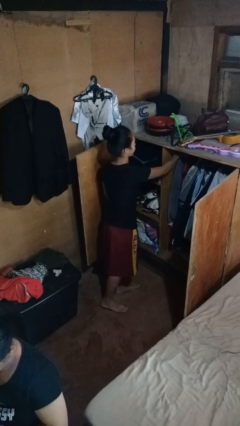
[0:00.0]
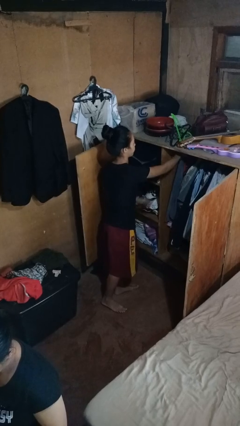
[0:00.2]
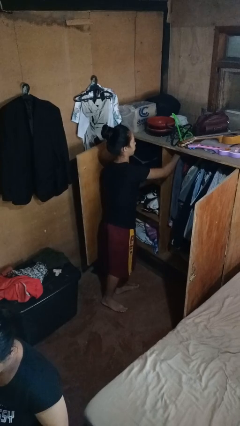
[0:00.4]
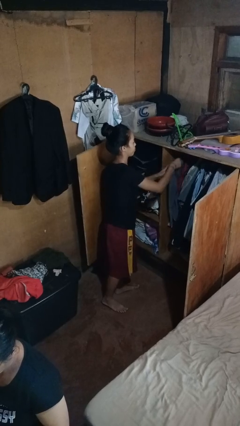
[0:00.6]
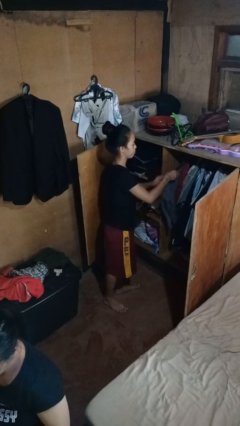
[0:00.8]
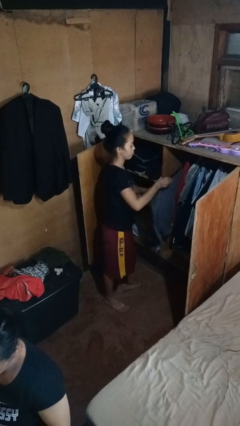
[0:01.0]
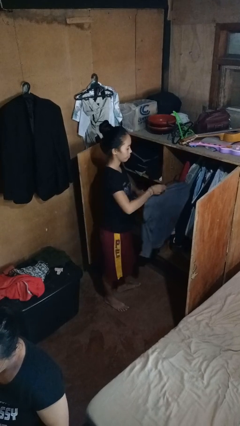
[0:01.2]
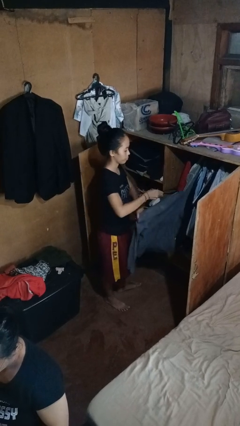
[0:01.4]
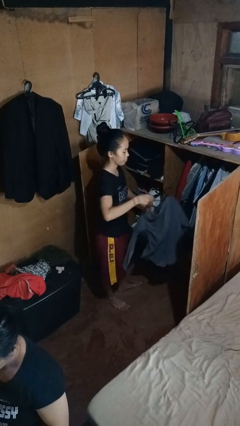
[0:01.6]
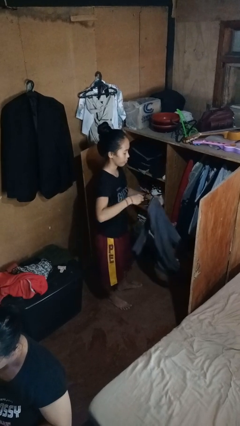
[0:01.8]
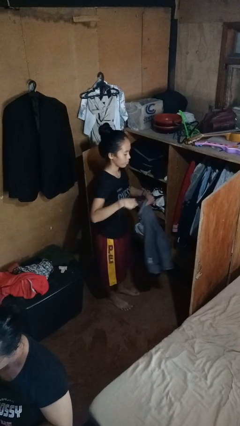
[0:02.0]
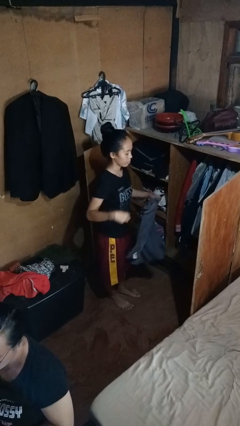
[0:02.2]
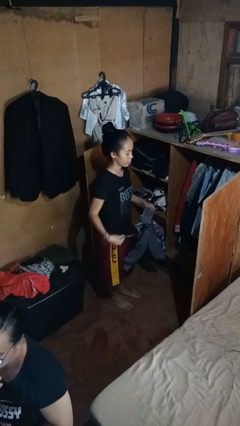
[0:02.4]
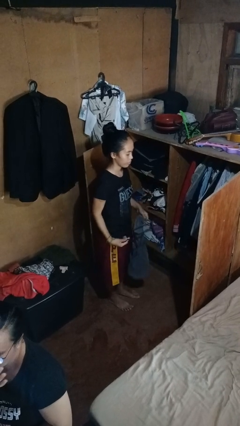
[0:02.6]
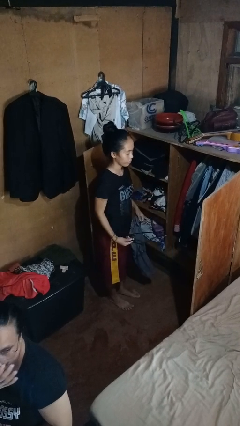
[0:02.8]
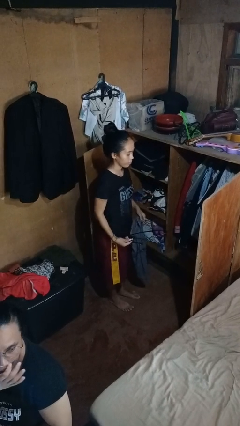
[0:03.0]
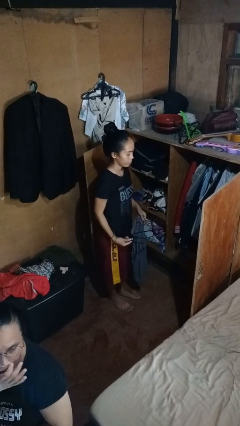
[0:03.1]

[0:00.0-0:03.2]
person takes clothes from closet

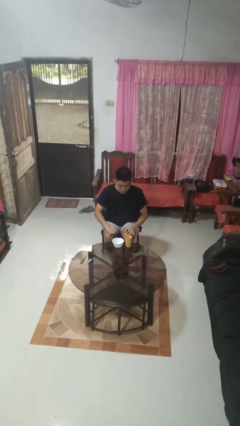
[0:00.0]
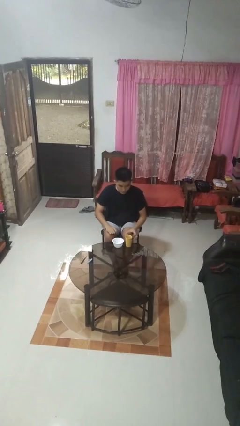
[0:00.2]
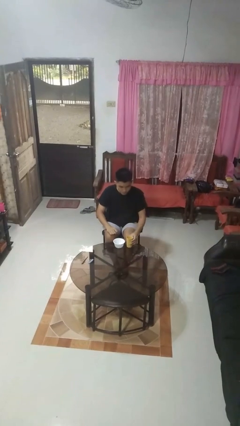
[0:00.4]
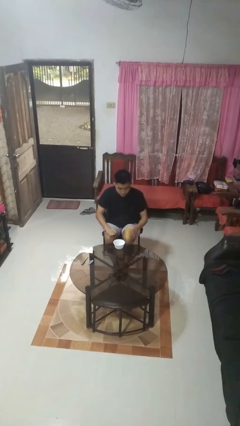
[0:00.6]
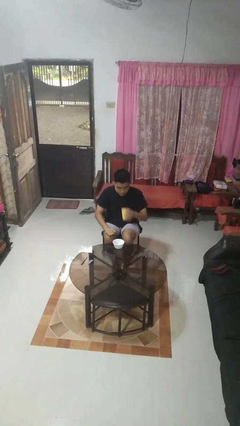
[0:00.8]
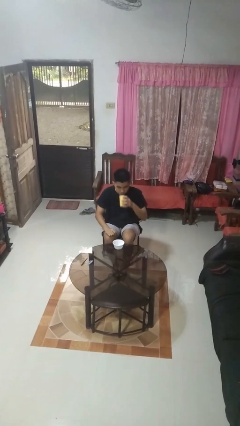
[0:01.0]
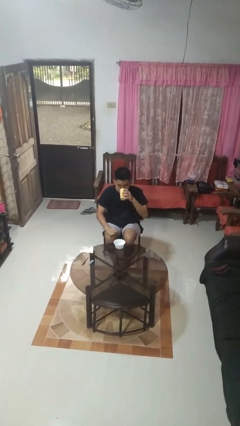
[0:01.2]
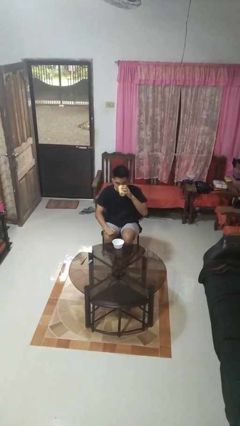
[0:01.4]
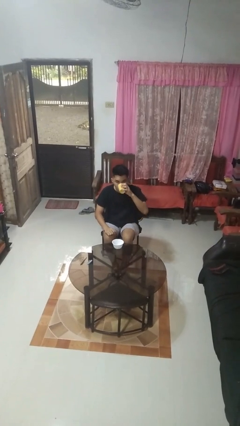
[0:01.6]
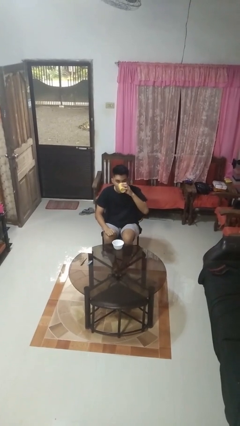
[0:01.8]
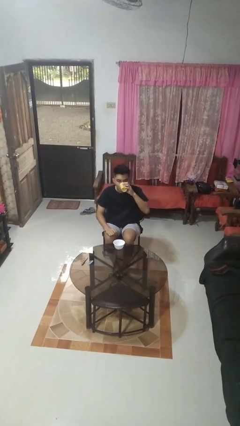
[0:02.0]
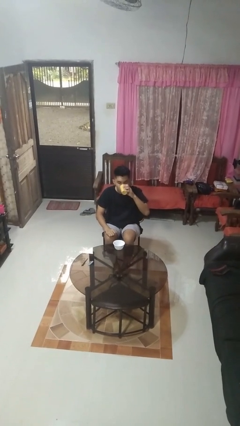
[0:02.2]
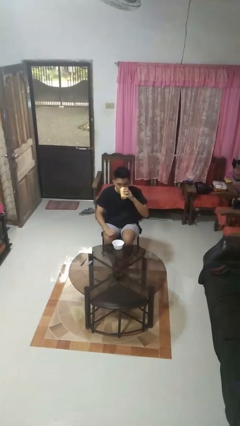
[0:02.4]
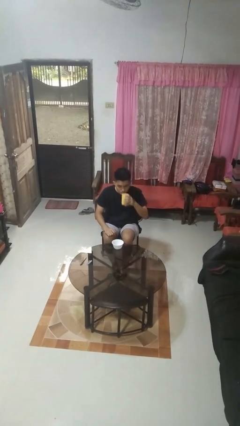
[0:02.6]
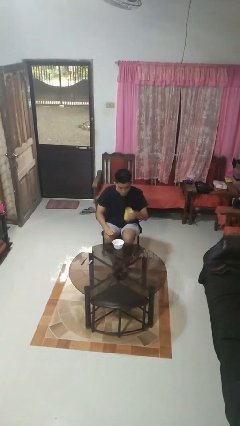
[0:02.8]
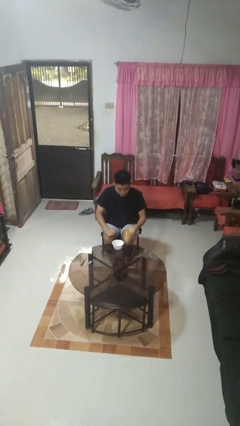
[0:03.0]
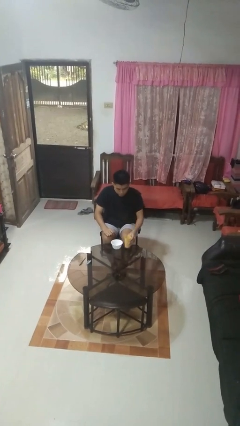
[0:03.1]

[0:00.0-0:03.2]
person drinks from cup

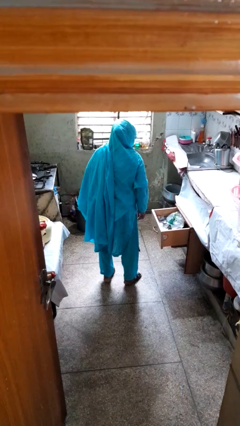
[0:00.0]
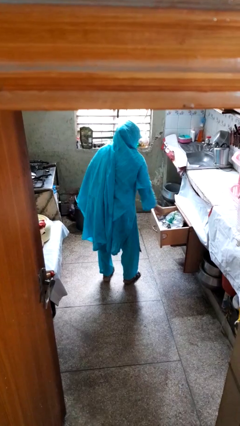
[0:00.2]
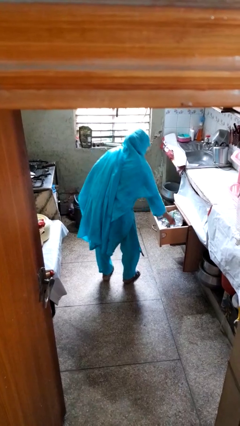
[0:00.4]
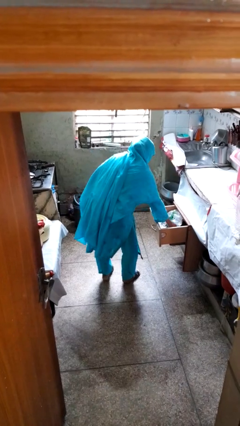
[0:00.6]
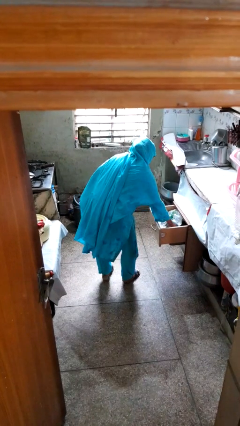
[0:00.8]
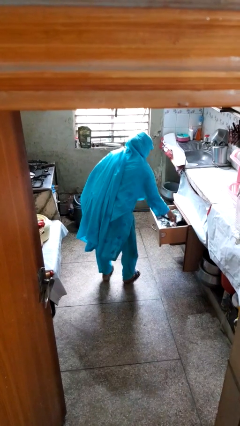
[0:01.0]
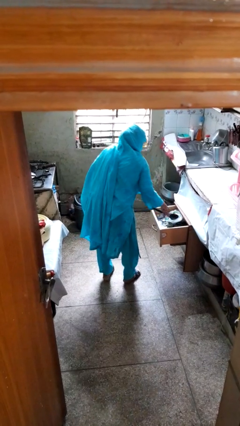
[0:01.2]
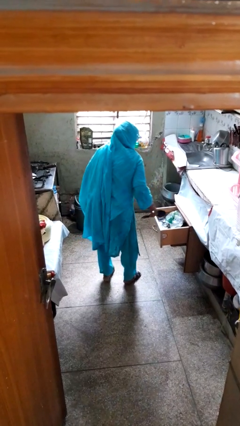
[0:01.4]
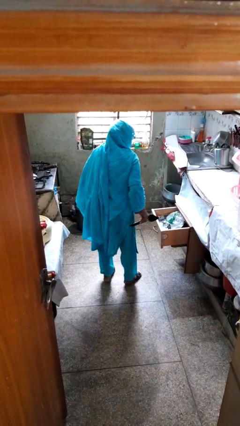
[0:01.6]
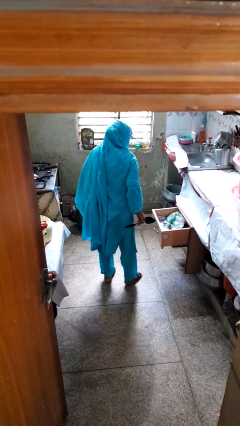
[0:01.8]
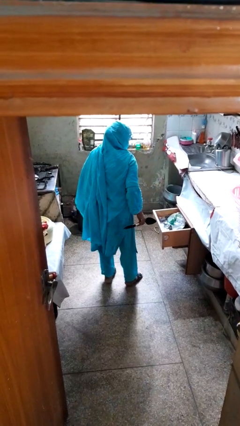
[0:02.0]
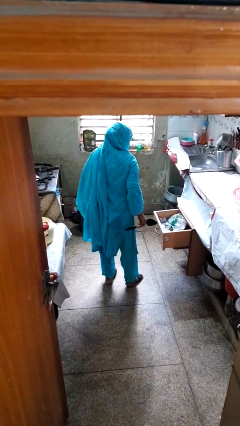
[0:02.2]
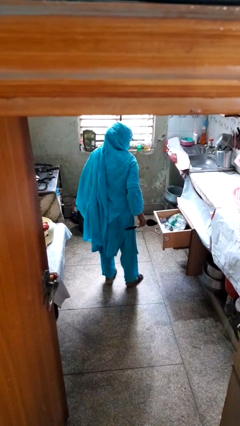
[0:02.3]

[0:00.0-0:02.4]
person takes object from kitchen drawer

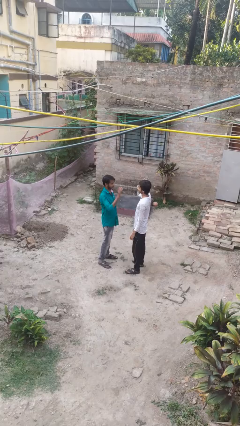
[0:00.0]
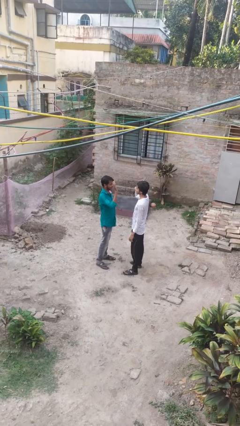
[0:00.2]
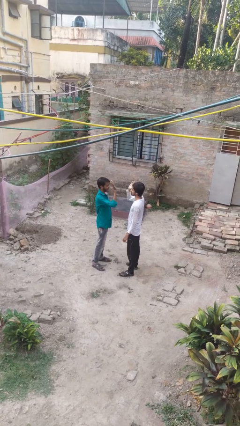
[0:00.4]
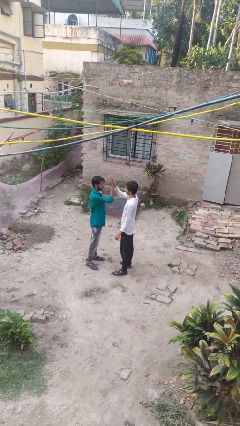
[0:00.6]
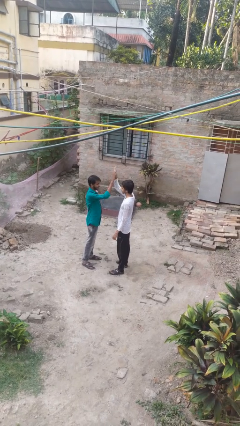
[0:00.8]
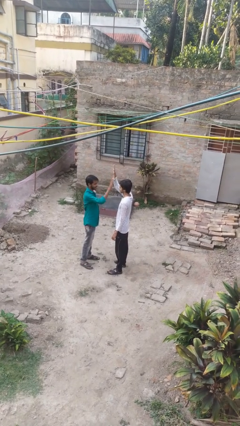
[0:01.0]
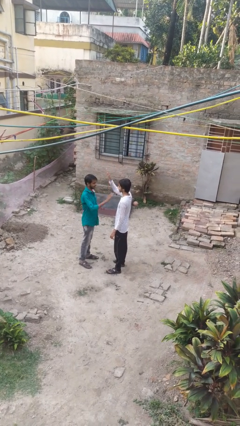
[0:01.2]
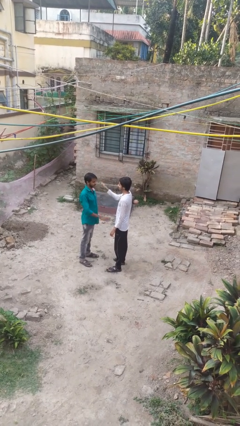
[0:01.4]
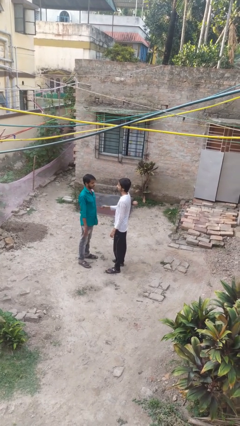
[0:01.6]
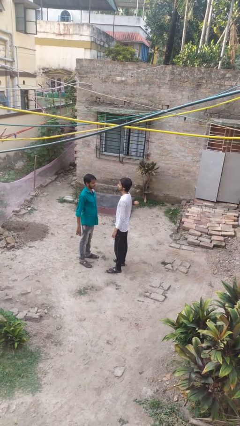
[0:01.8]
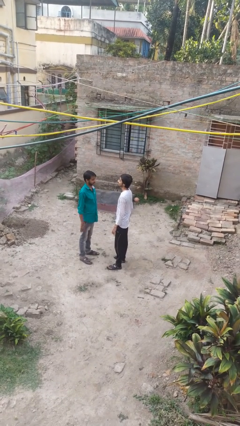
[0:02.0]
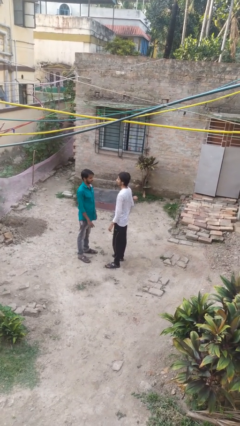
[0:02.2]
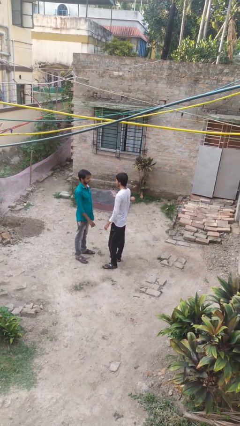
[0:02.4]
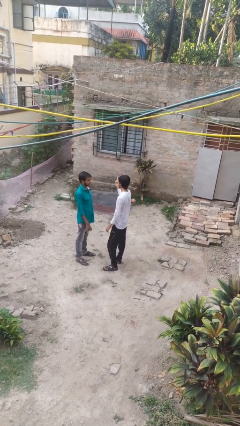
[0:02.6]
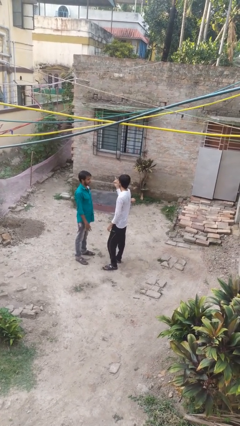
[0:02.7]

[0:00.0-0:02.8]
person highfives hand

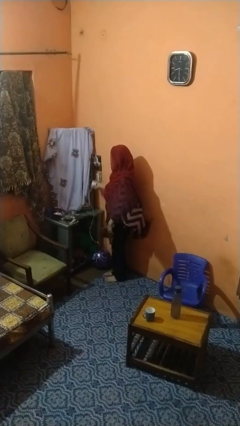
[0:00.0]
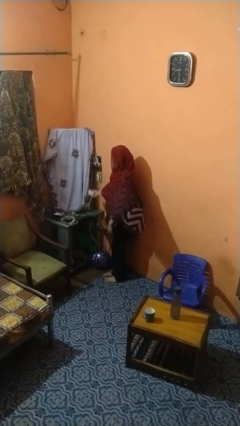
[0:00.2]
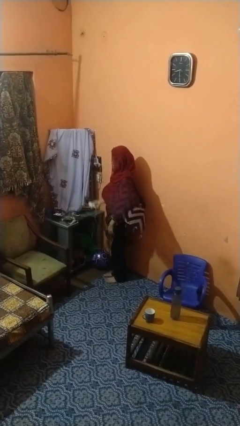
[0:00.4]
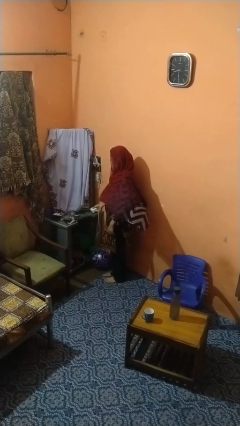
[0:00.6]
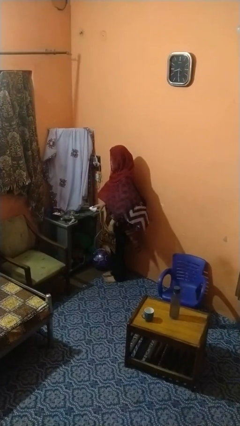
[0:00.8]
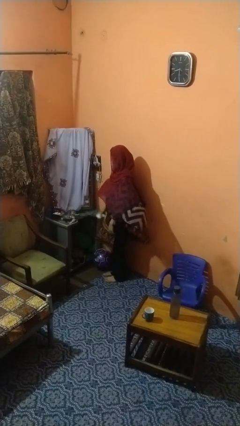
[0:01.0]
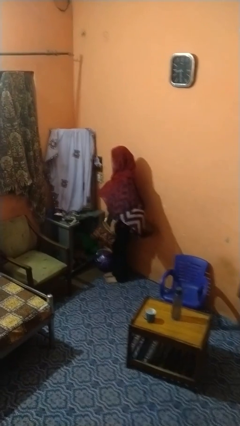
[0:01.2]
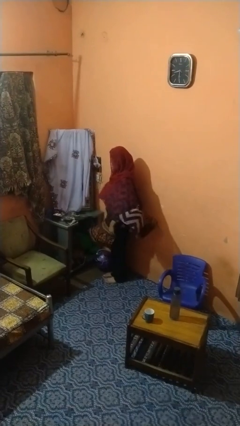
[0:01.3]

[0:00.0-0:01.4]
person unplugs from electrical socket

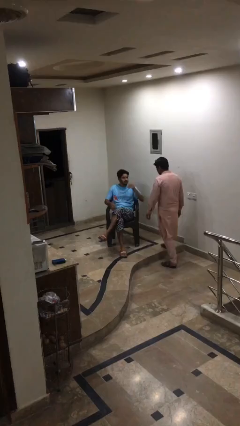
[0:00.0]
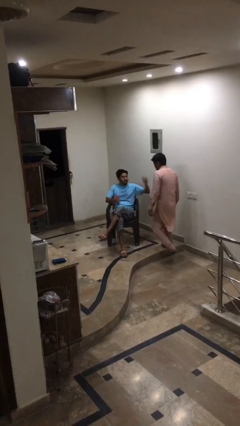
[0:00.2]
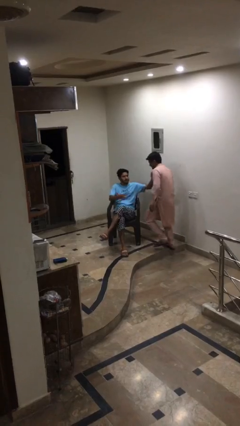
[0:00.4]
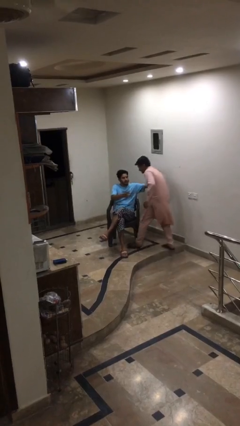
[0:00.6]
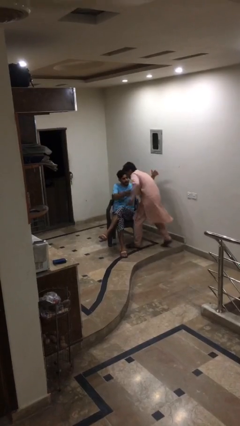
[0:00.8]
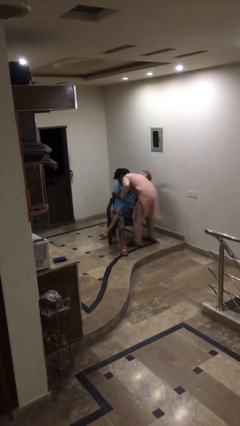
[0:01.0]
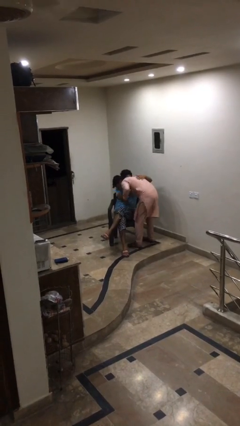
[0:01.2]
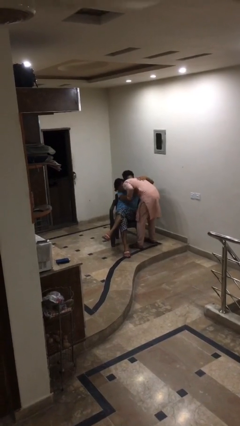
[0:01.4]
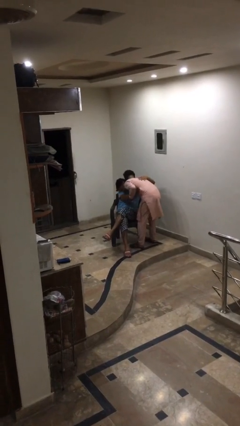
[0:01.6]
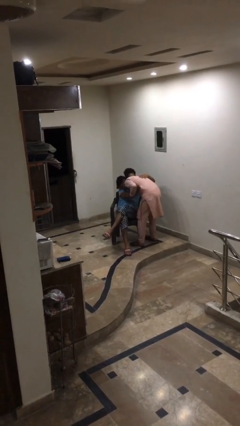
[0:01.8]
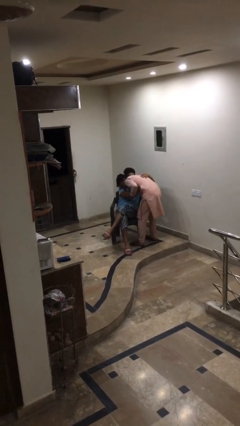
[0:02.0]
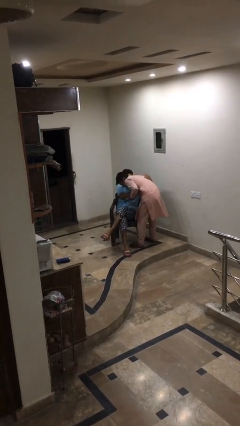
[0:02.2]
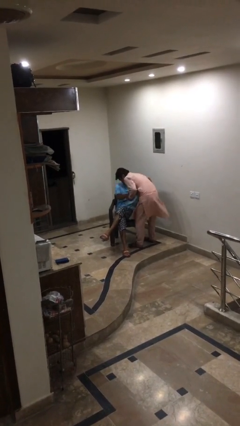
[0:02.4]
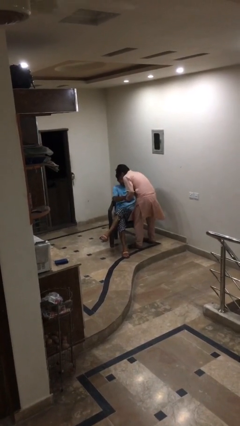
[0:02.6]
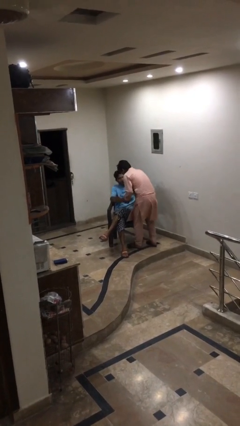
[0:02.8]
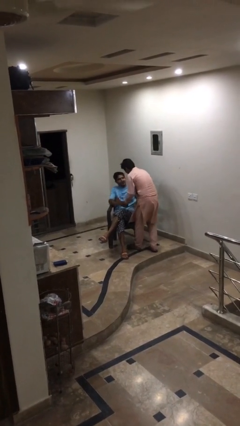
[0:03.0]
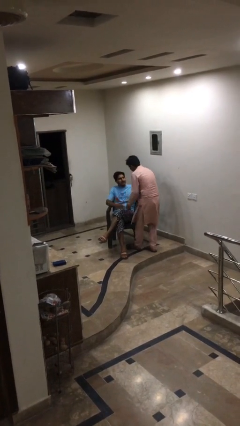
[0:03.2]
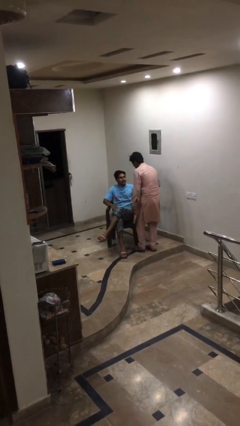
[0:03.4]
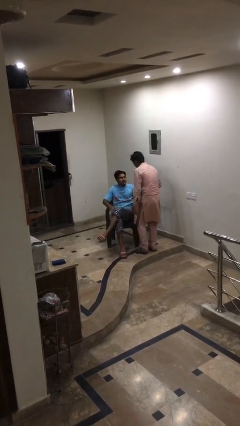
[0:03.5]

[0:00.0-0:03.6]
person embraces person

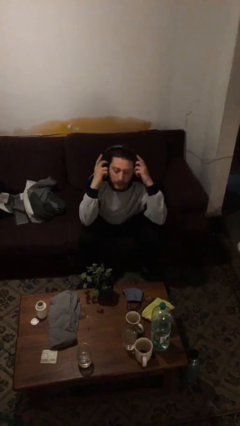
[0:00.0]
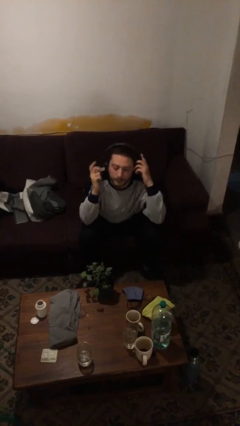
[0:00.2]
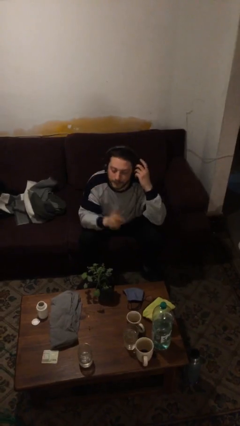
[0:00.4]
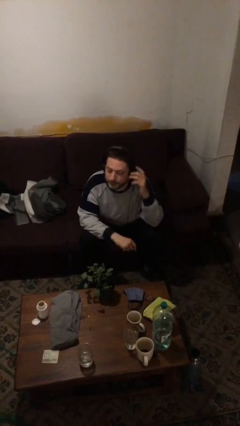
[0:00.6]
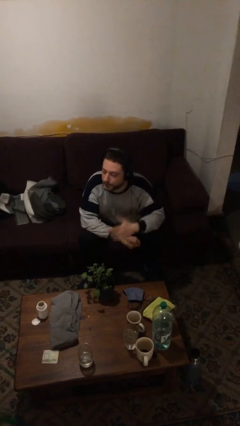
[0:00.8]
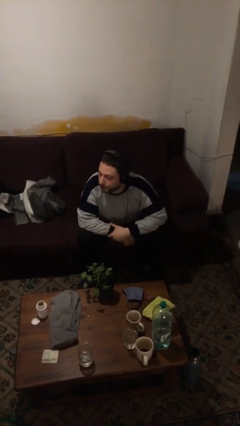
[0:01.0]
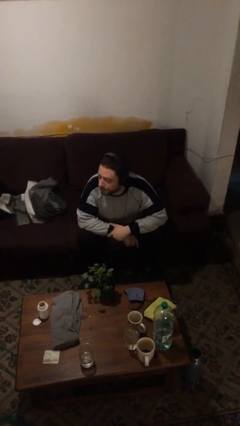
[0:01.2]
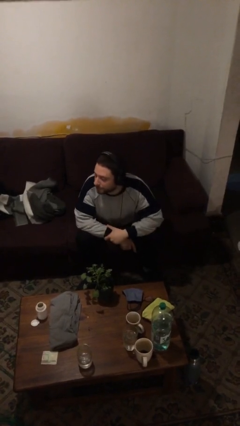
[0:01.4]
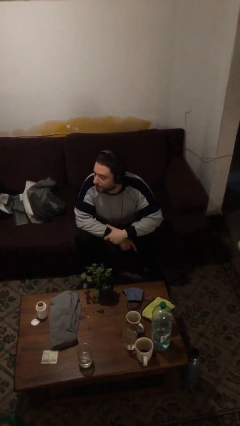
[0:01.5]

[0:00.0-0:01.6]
person puts on headphones
